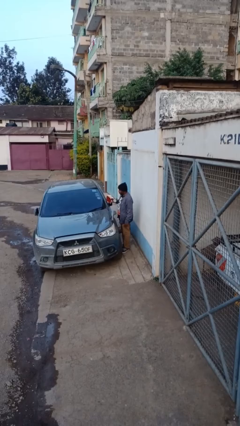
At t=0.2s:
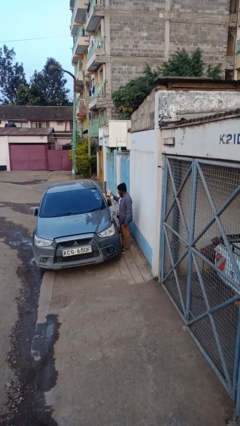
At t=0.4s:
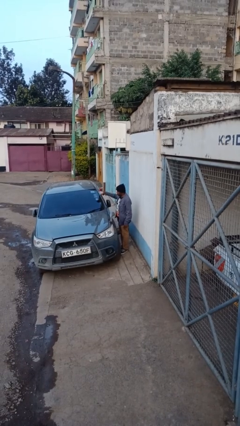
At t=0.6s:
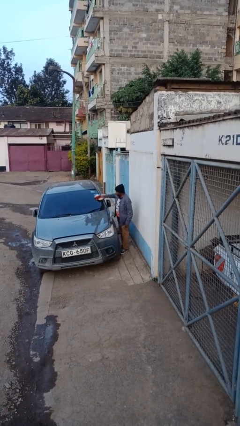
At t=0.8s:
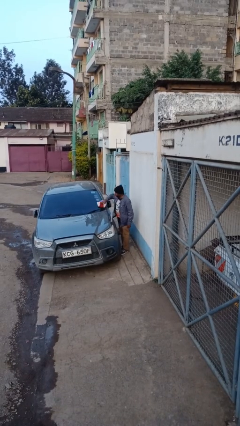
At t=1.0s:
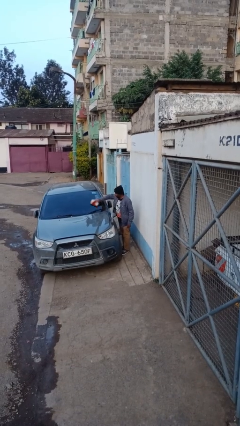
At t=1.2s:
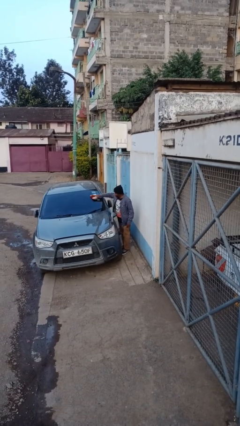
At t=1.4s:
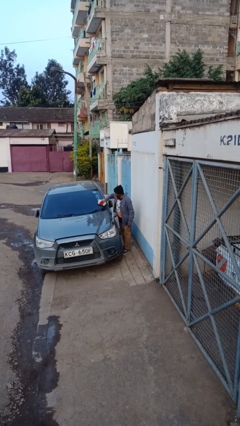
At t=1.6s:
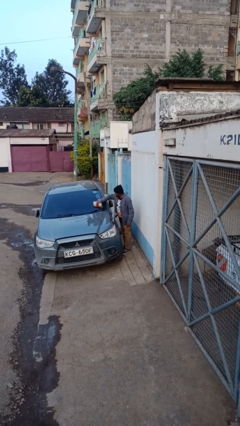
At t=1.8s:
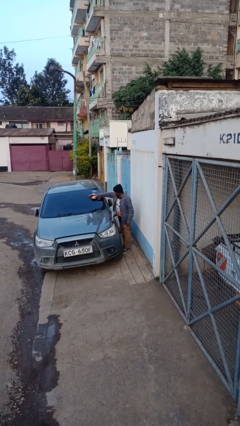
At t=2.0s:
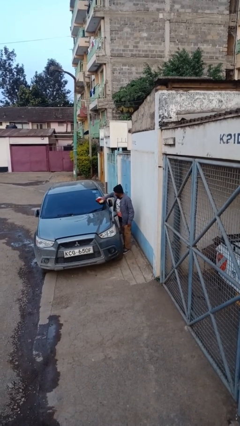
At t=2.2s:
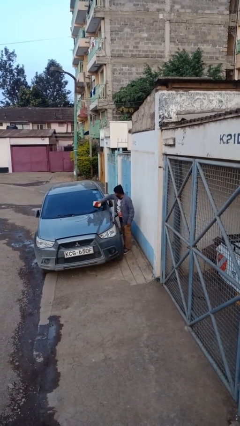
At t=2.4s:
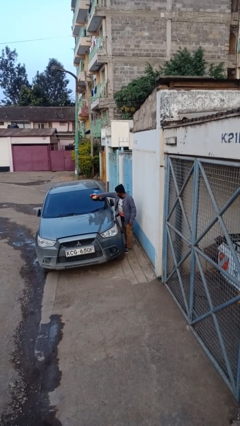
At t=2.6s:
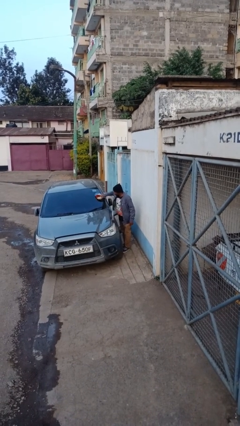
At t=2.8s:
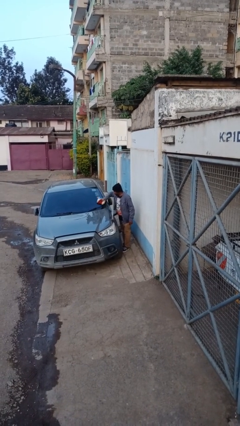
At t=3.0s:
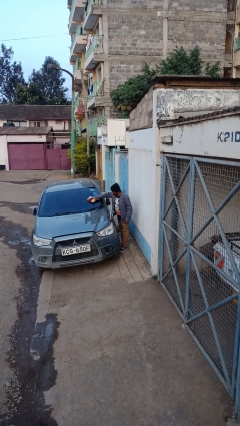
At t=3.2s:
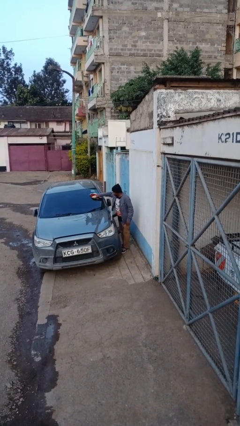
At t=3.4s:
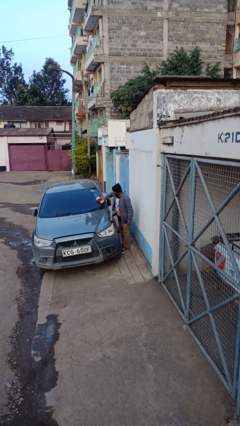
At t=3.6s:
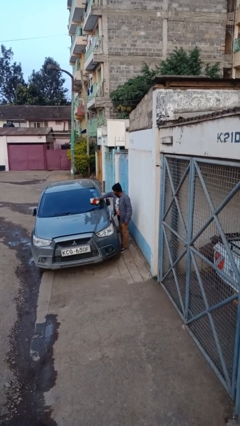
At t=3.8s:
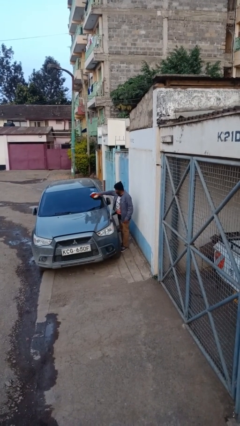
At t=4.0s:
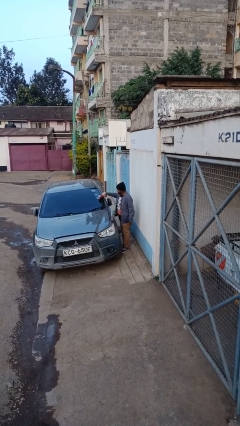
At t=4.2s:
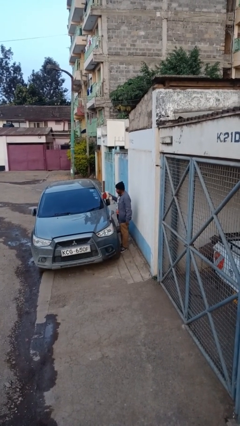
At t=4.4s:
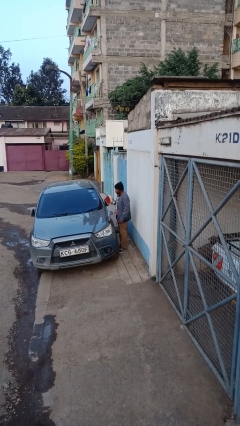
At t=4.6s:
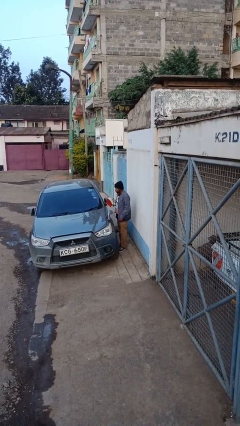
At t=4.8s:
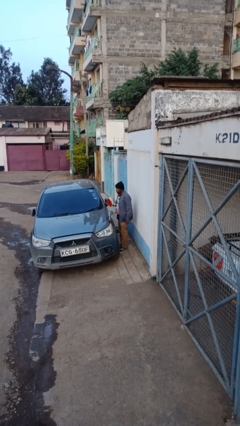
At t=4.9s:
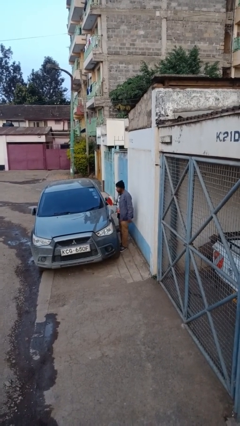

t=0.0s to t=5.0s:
person polishes car with rag

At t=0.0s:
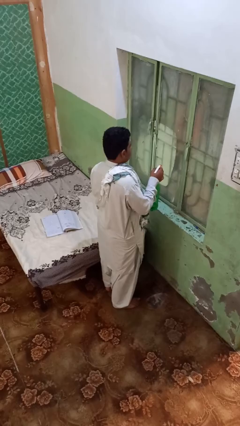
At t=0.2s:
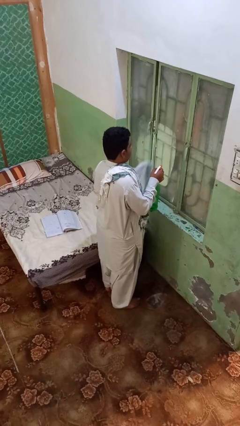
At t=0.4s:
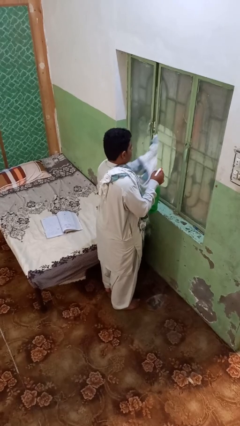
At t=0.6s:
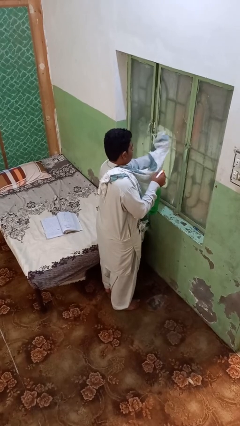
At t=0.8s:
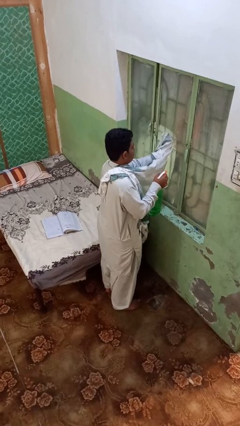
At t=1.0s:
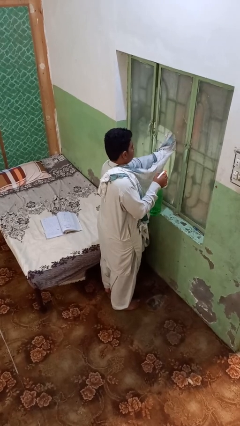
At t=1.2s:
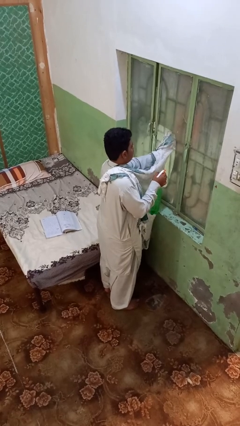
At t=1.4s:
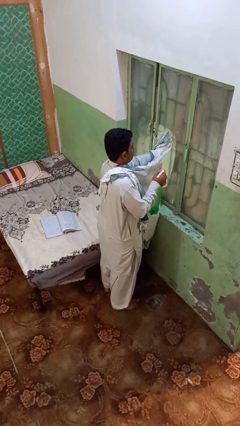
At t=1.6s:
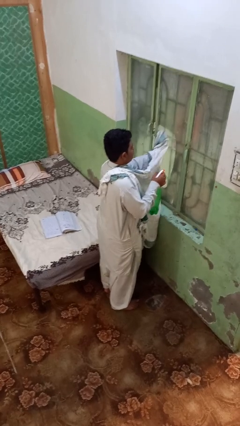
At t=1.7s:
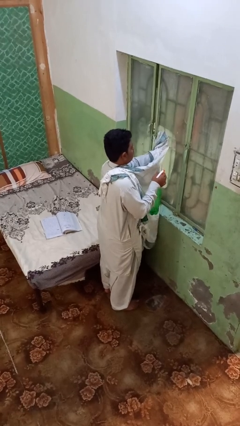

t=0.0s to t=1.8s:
person washes window

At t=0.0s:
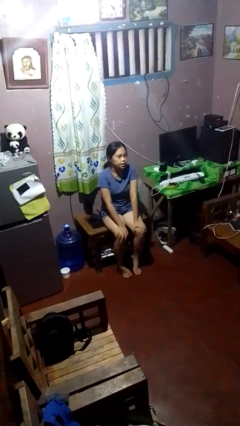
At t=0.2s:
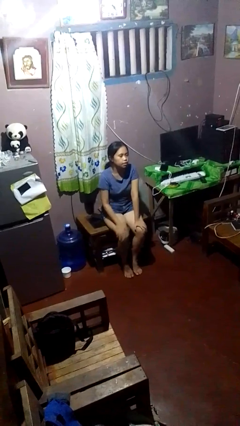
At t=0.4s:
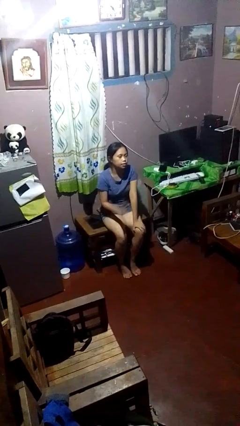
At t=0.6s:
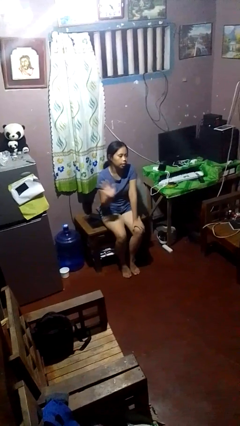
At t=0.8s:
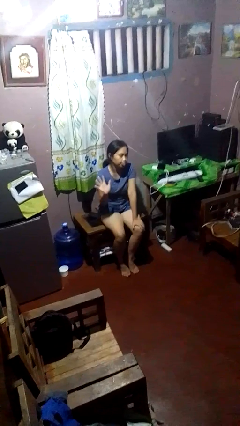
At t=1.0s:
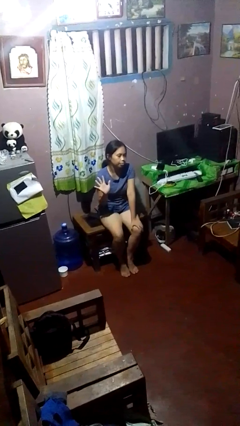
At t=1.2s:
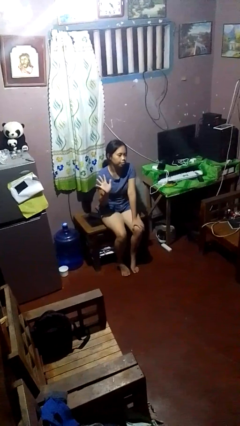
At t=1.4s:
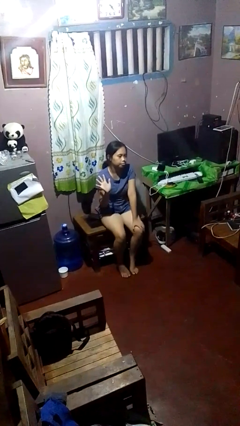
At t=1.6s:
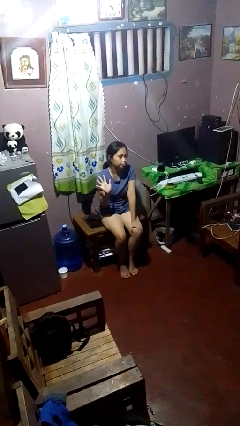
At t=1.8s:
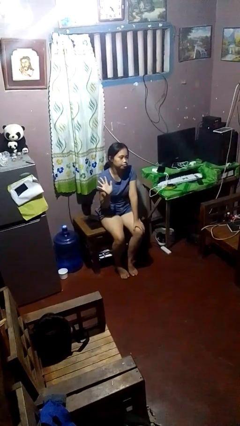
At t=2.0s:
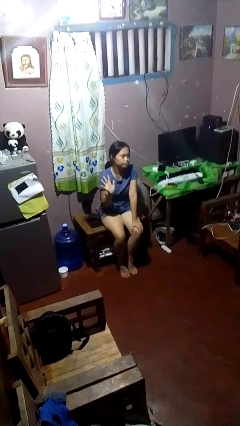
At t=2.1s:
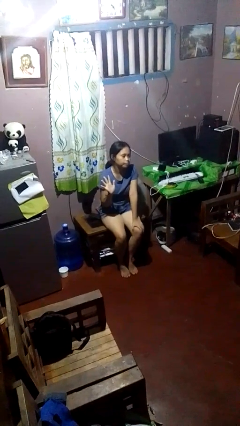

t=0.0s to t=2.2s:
person gestures number five

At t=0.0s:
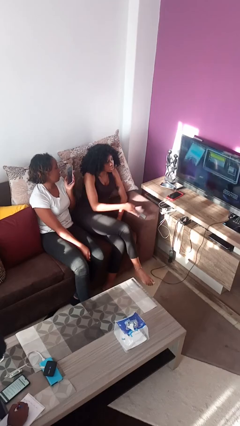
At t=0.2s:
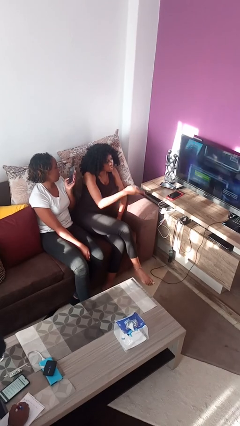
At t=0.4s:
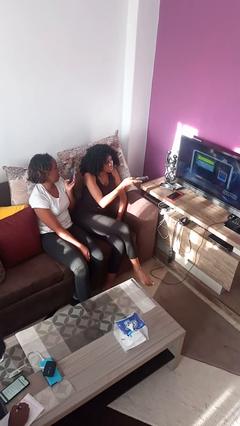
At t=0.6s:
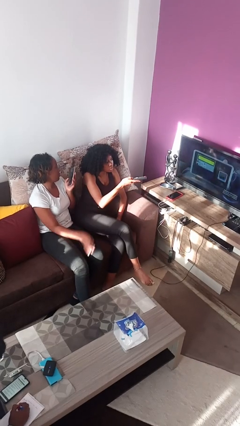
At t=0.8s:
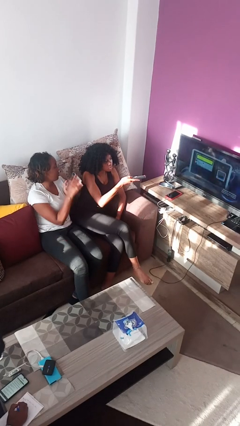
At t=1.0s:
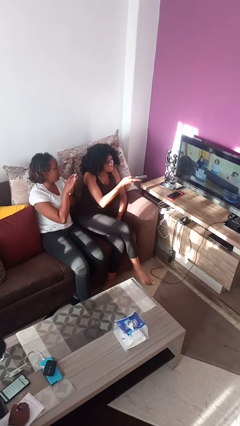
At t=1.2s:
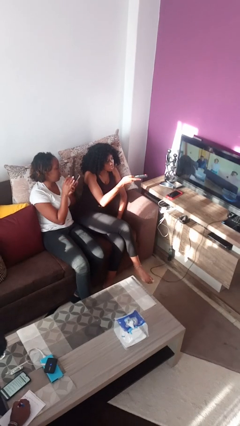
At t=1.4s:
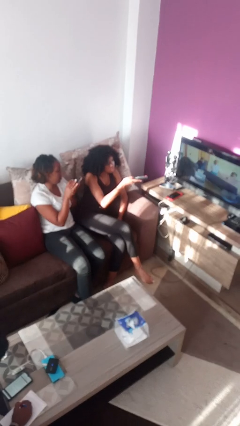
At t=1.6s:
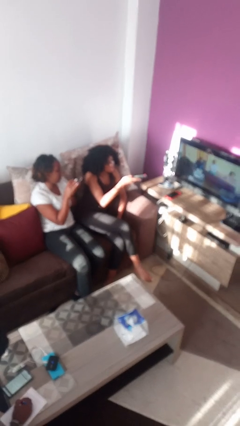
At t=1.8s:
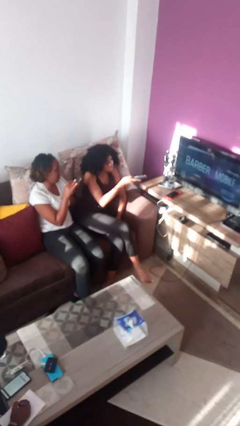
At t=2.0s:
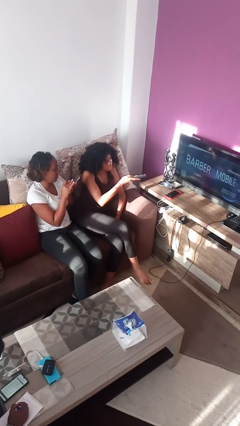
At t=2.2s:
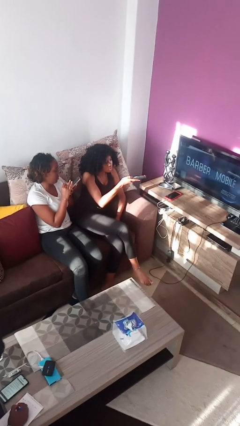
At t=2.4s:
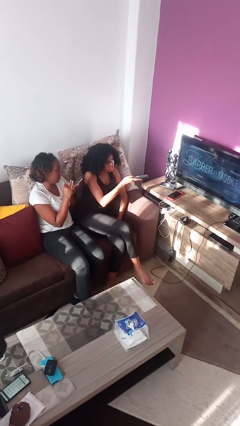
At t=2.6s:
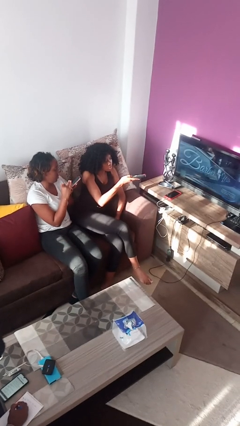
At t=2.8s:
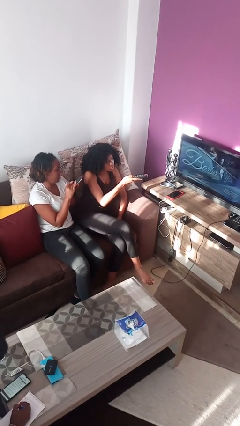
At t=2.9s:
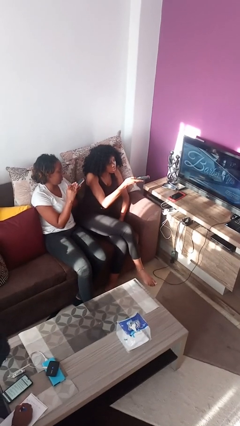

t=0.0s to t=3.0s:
person uses television remote

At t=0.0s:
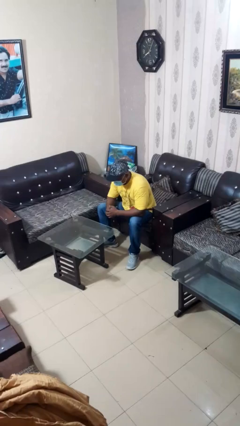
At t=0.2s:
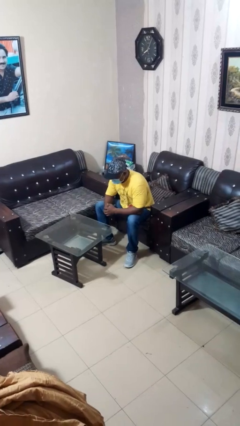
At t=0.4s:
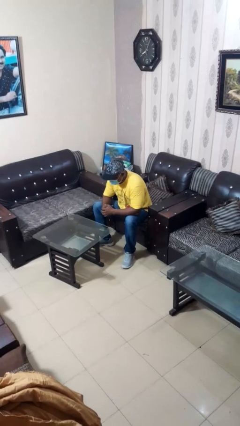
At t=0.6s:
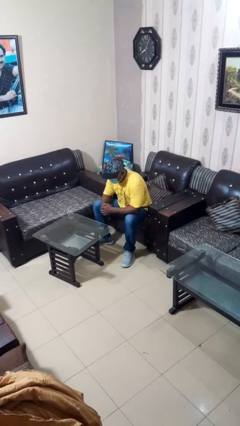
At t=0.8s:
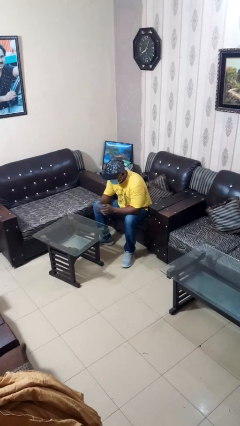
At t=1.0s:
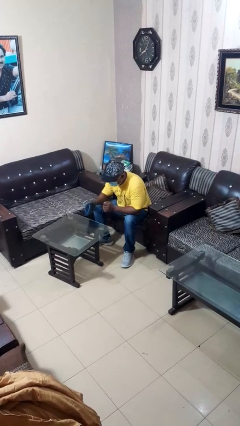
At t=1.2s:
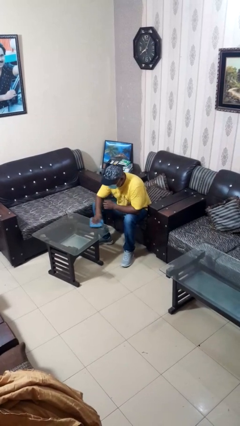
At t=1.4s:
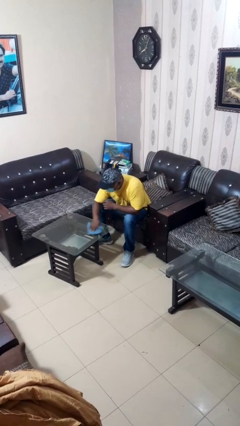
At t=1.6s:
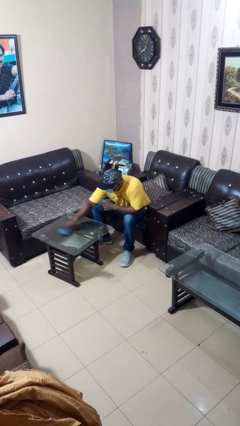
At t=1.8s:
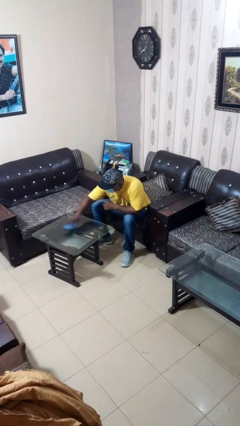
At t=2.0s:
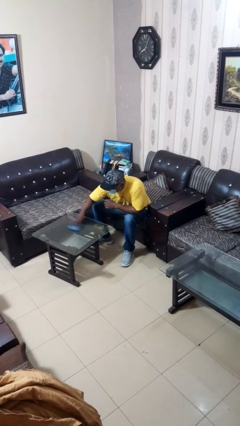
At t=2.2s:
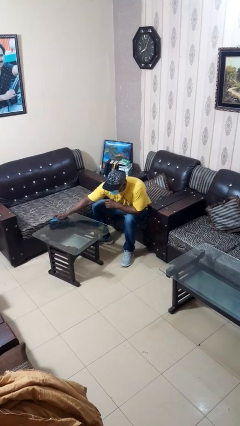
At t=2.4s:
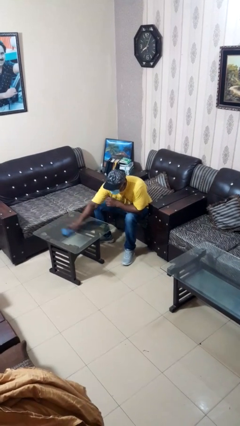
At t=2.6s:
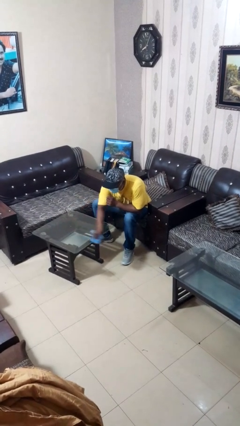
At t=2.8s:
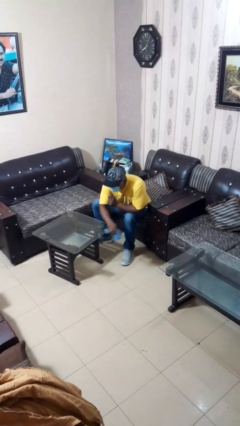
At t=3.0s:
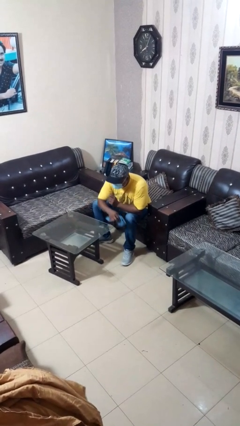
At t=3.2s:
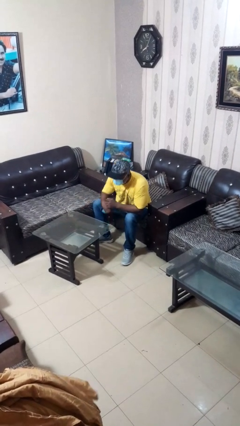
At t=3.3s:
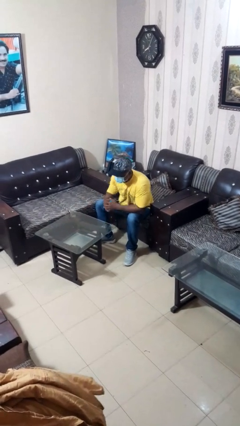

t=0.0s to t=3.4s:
person cleans table with rag

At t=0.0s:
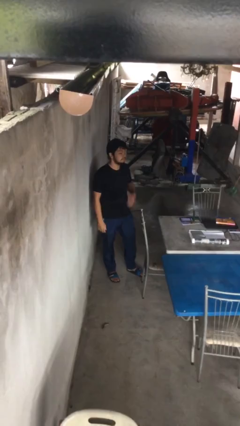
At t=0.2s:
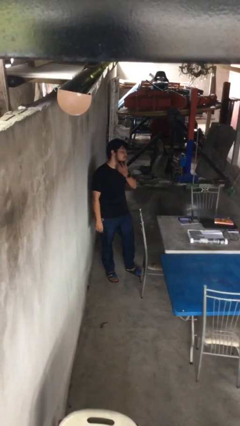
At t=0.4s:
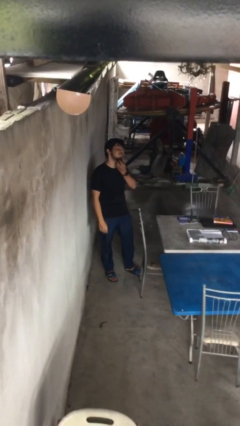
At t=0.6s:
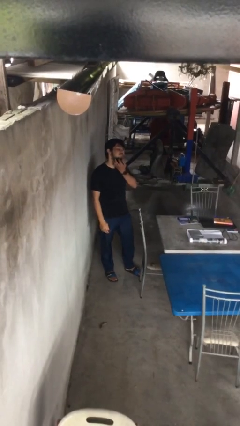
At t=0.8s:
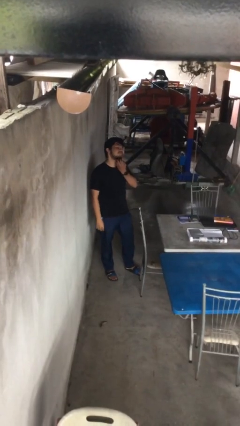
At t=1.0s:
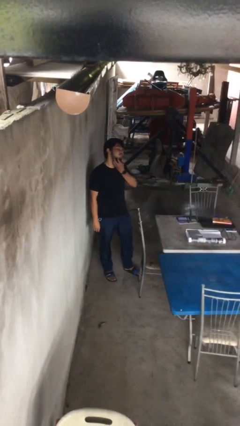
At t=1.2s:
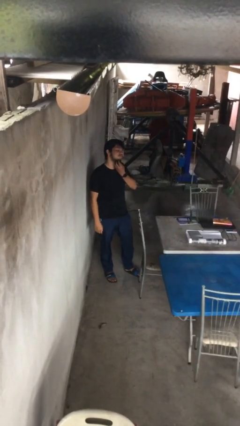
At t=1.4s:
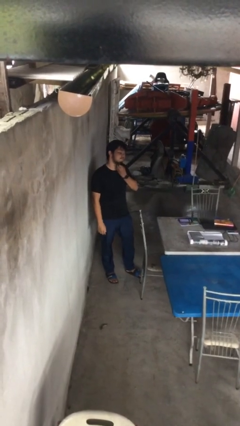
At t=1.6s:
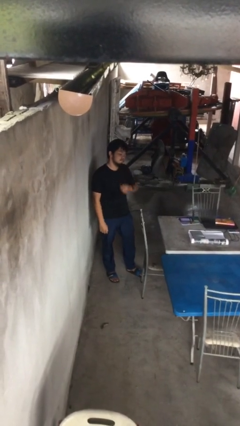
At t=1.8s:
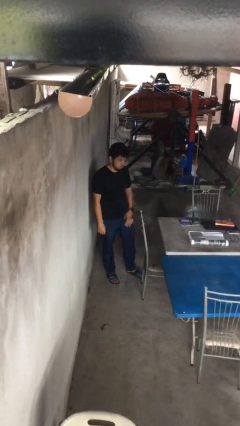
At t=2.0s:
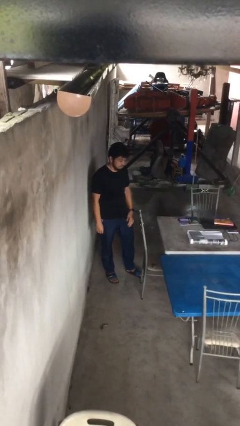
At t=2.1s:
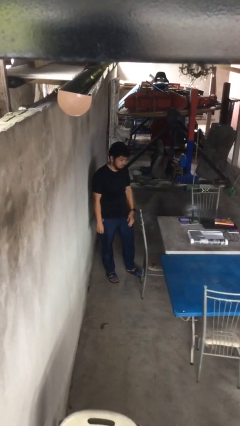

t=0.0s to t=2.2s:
person scratches face
